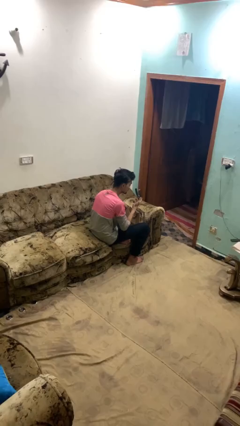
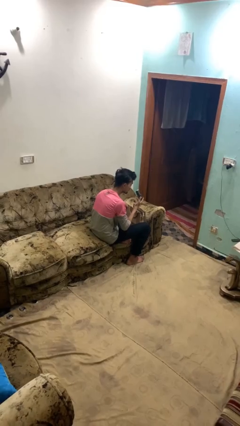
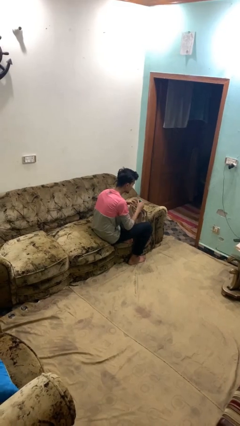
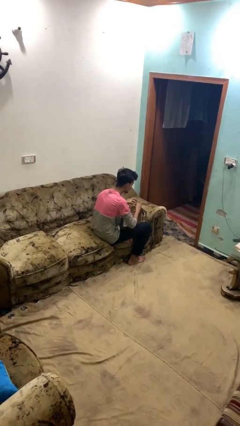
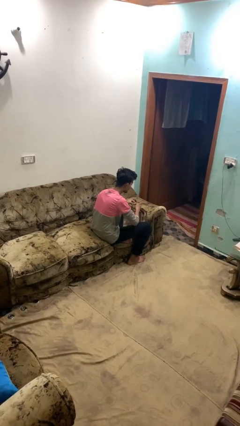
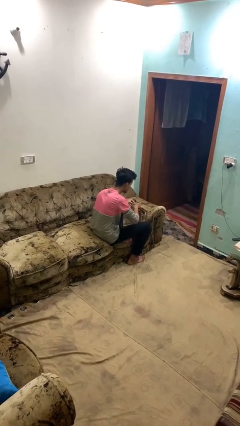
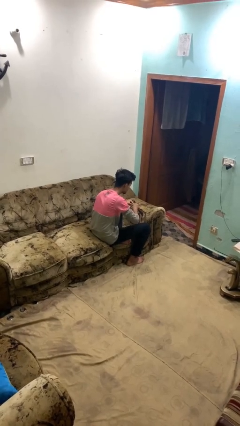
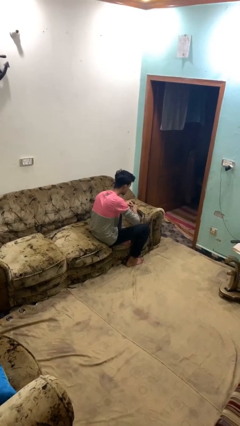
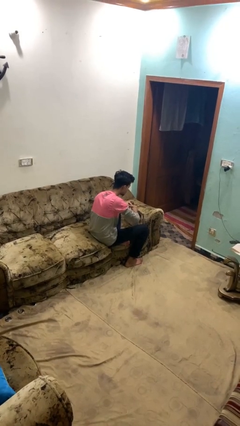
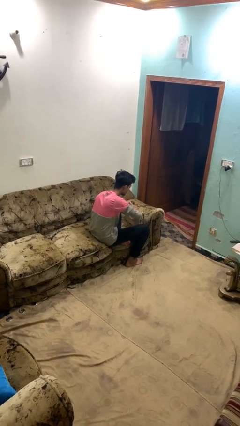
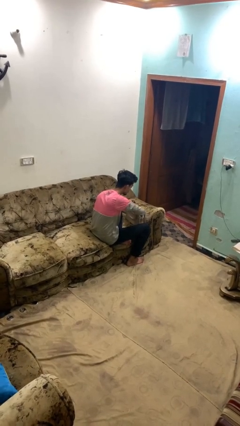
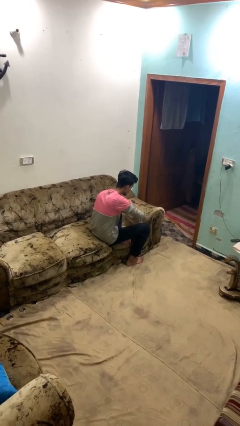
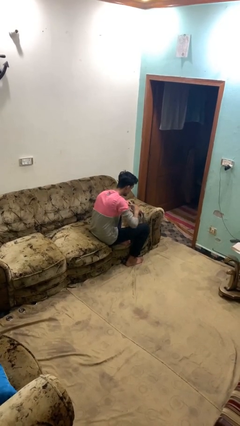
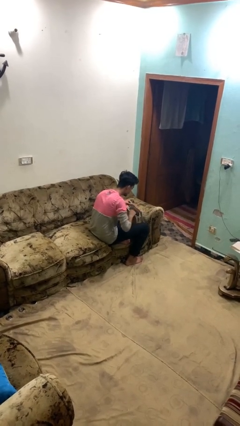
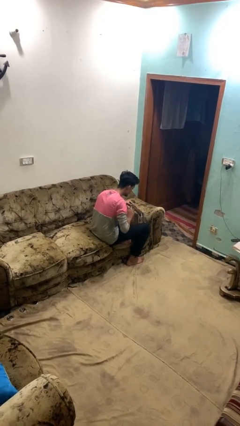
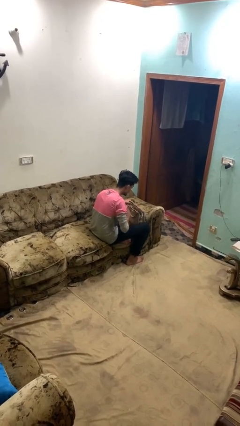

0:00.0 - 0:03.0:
person puts object into purse

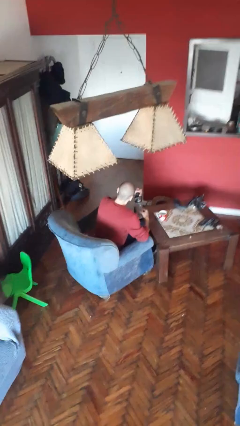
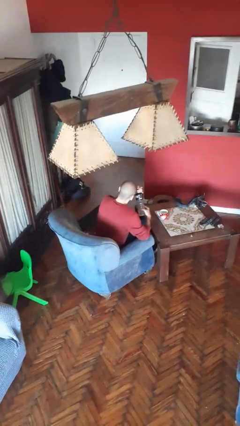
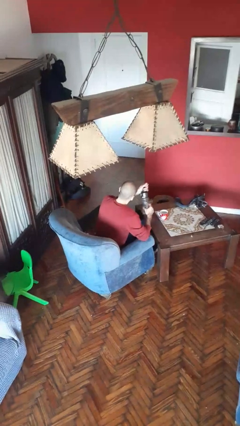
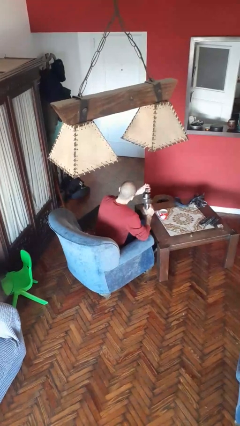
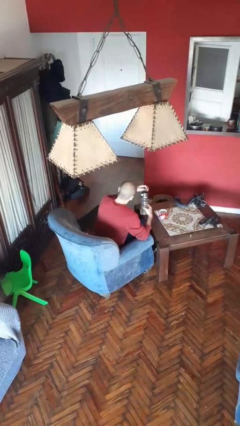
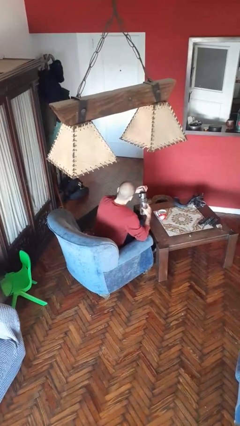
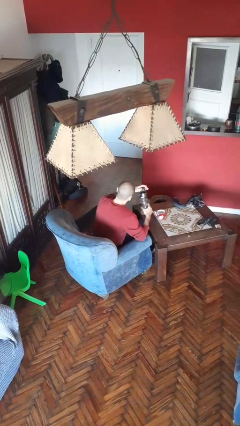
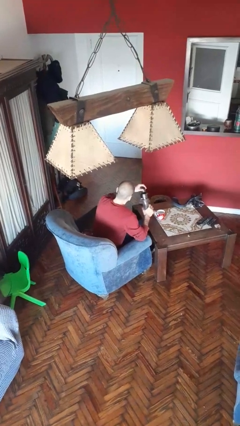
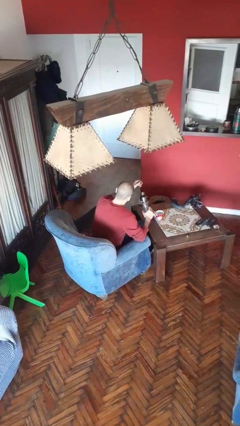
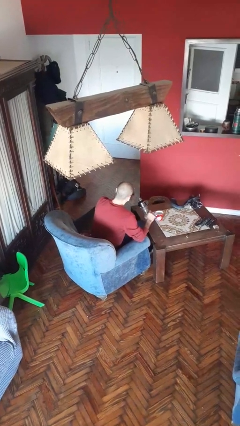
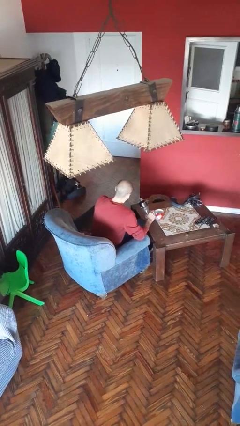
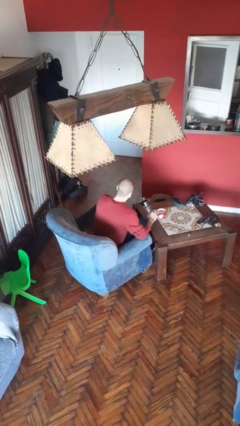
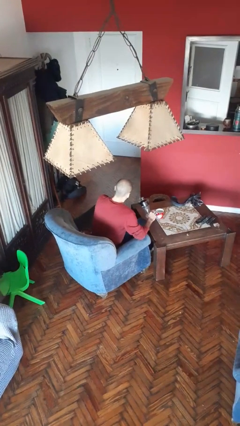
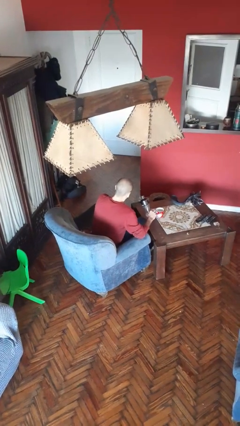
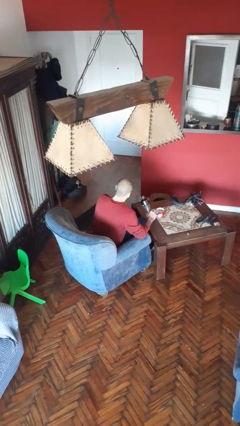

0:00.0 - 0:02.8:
person unscrews lid from bottle

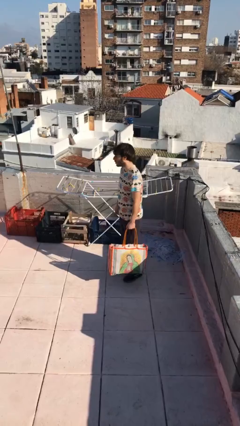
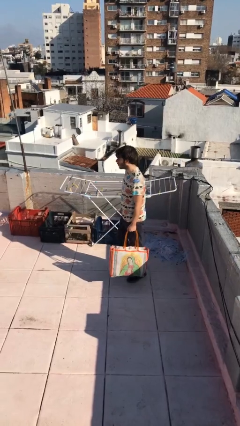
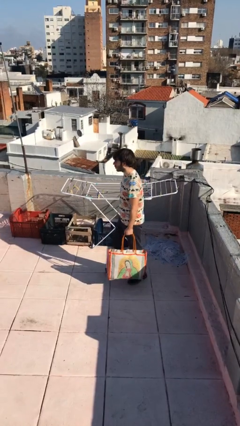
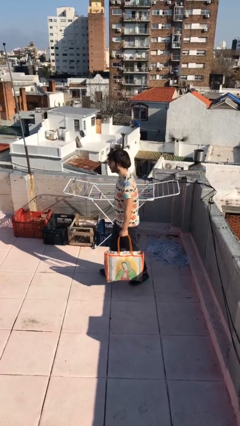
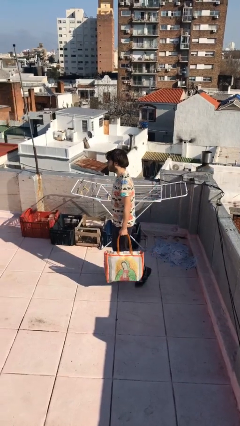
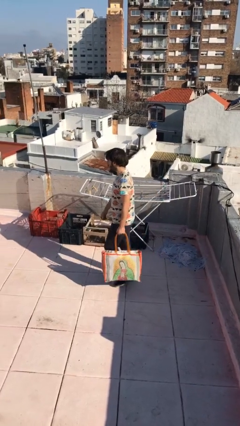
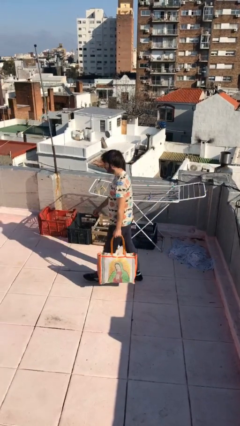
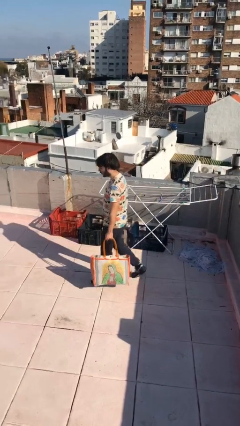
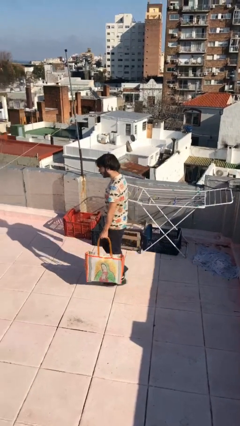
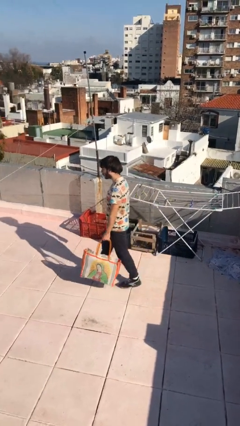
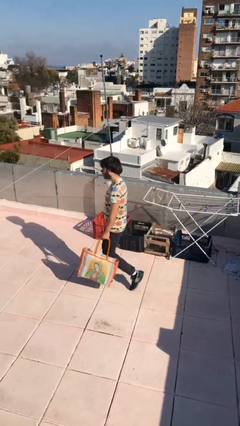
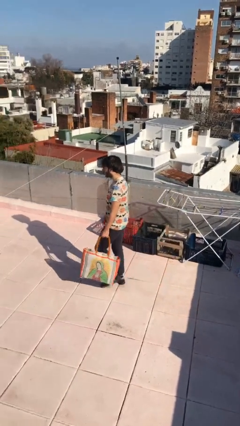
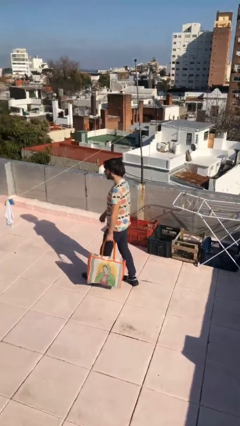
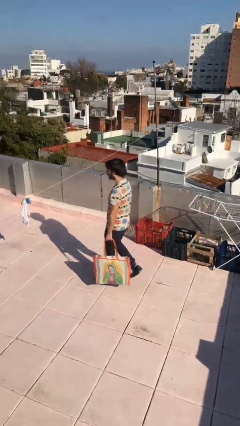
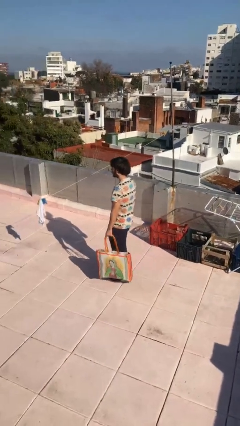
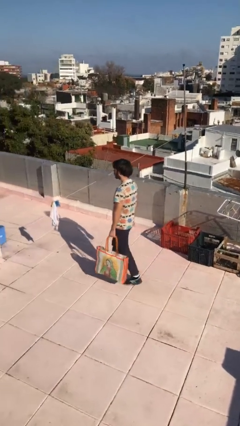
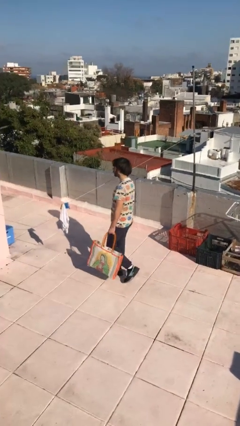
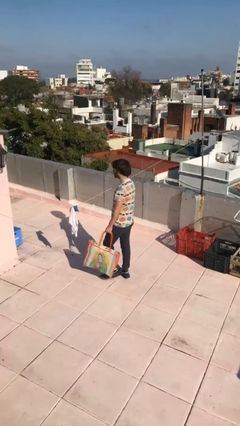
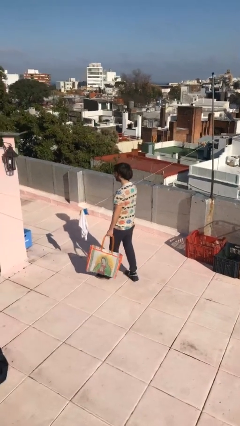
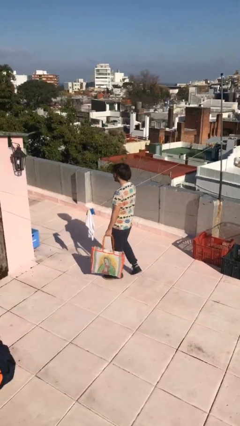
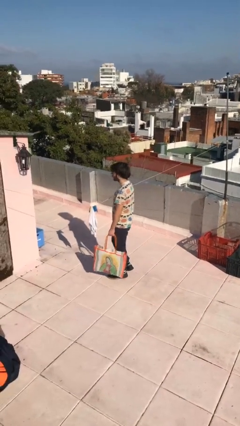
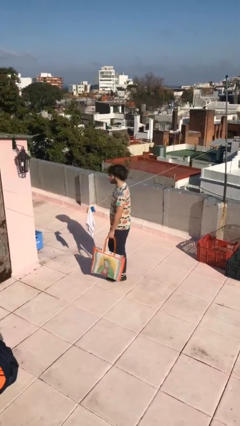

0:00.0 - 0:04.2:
person carries groceries

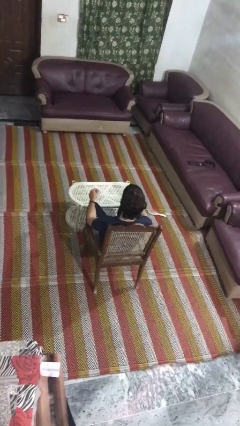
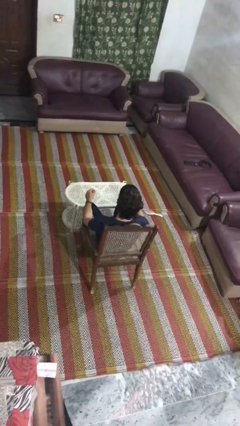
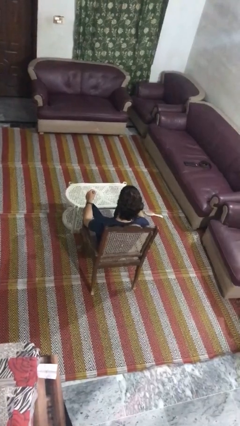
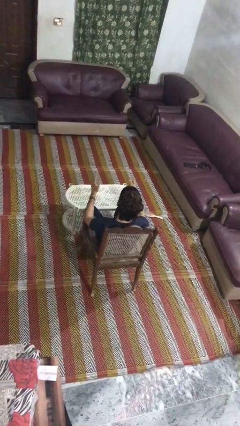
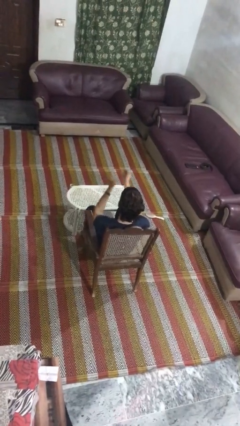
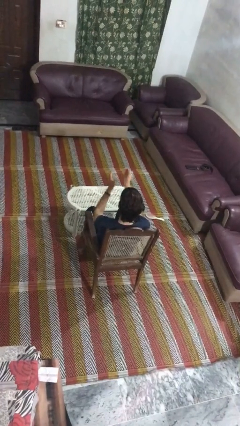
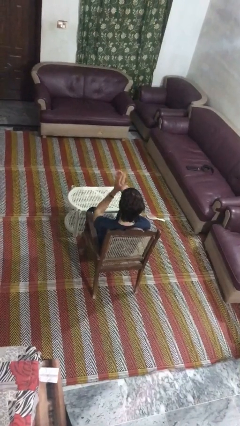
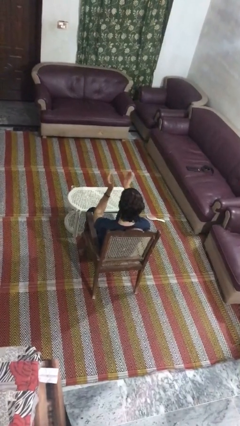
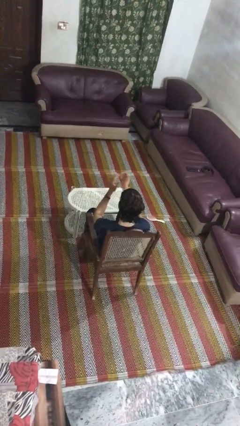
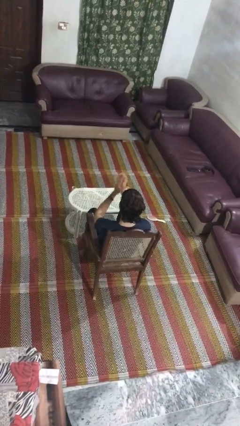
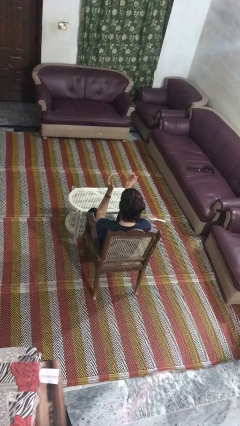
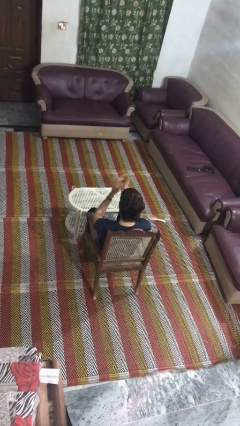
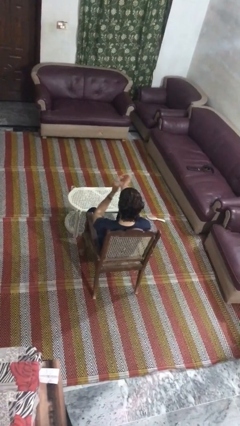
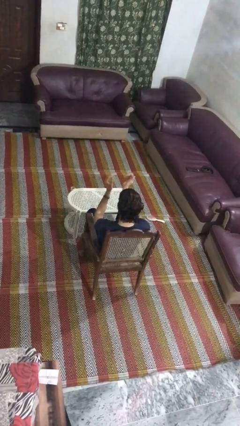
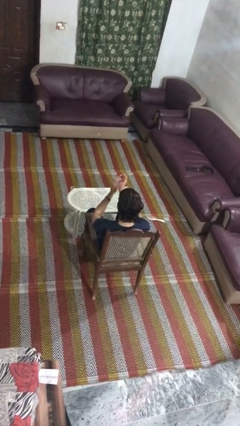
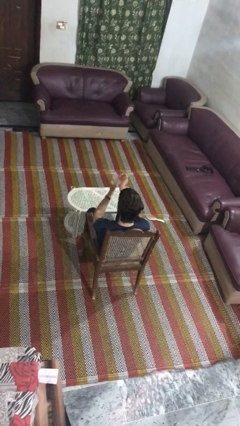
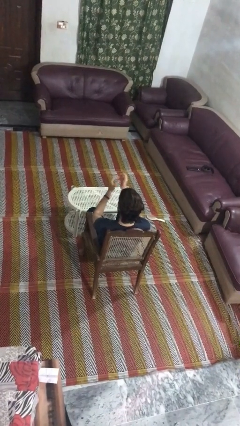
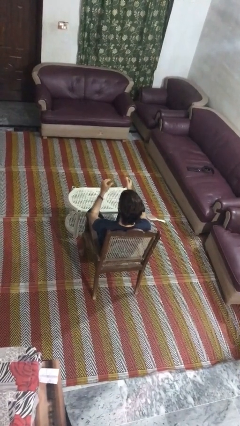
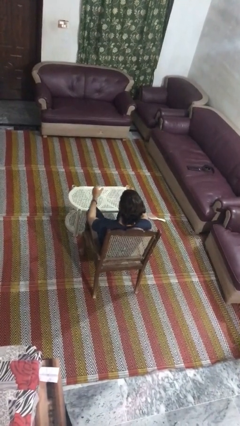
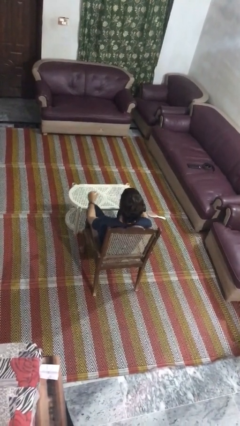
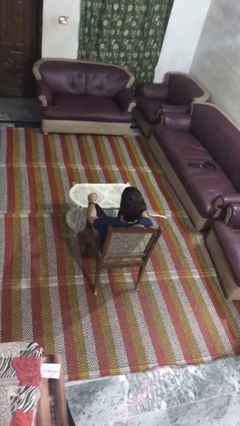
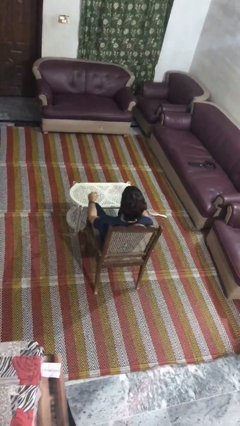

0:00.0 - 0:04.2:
person claps hands

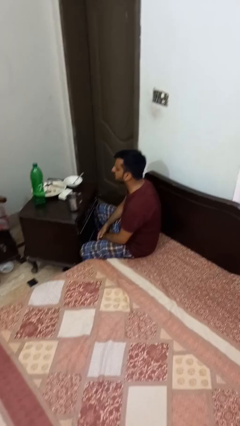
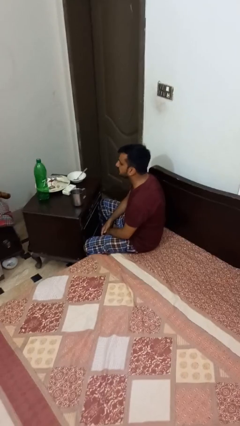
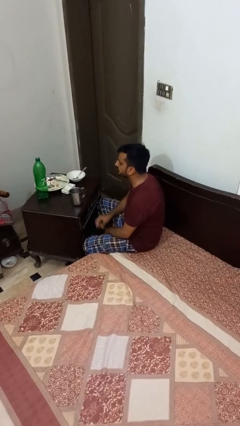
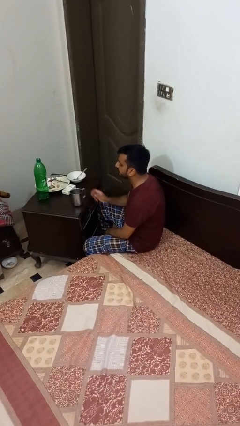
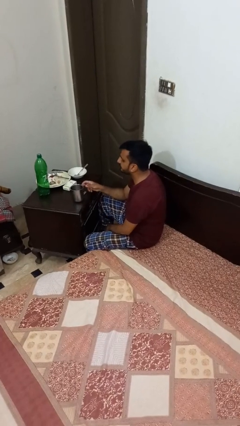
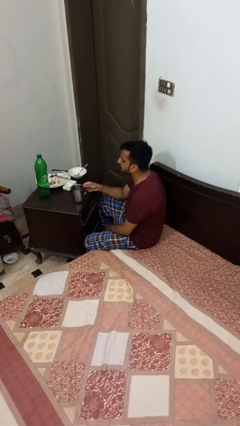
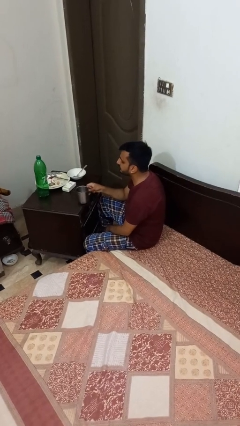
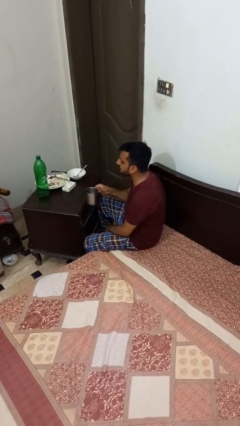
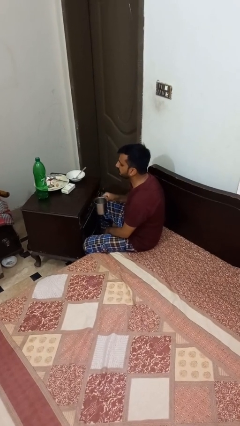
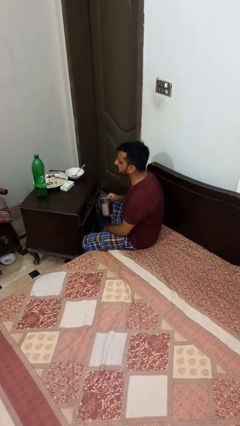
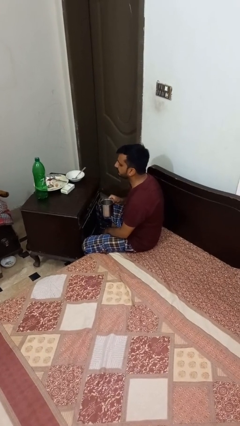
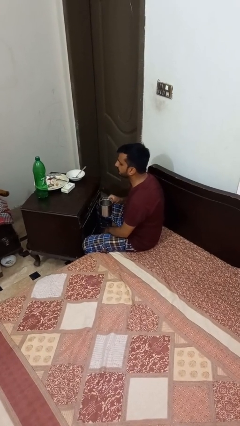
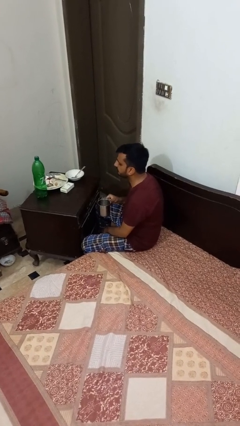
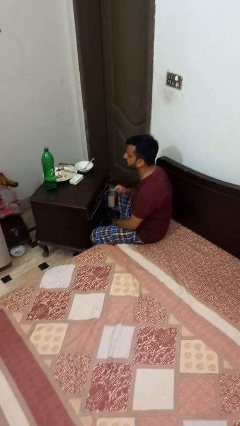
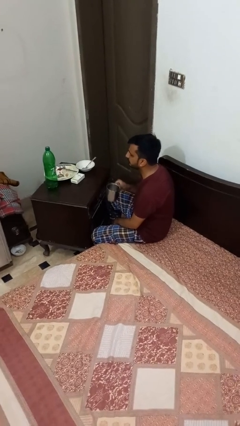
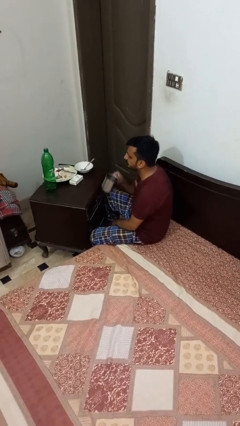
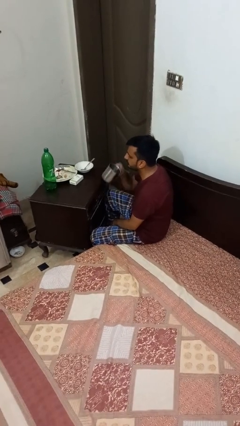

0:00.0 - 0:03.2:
person picks up object from table
